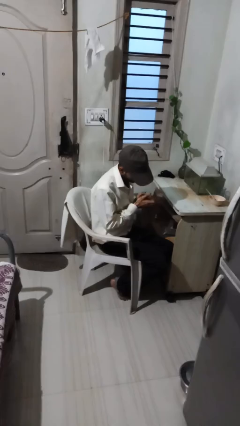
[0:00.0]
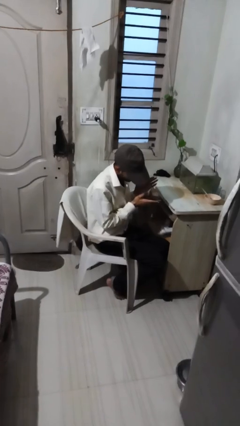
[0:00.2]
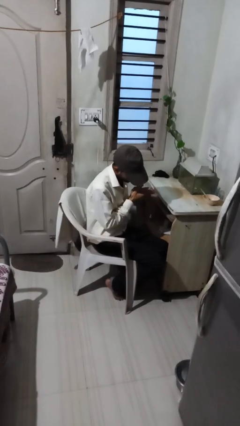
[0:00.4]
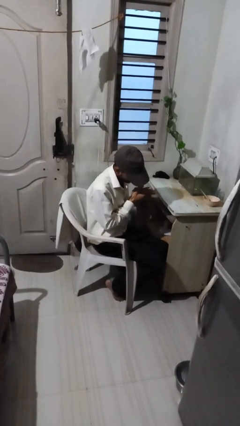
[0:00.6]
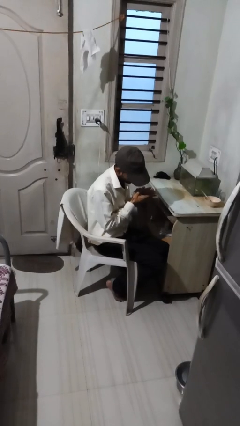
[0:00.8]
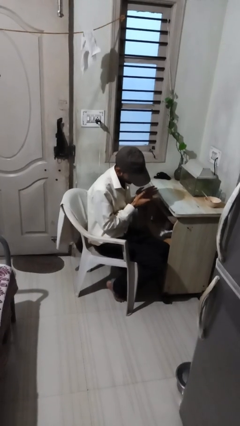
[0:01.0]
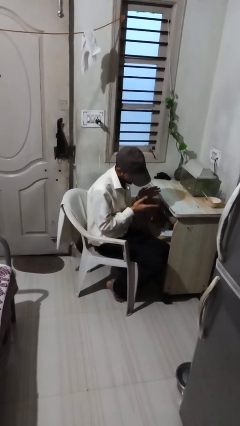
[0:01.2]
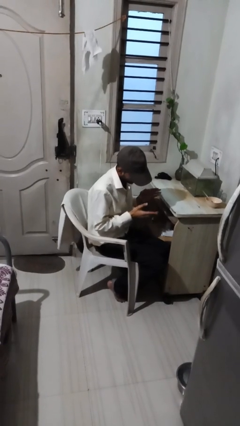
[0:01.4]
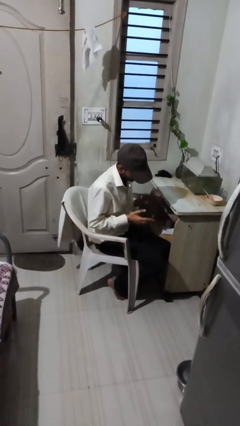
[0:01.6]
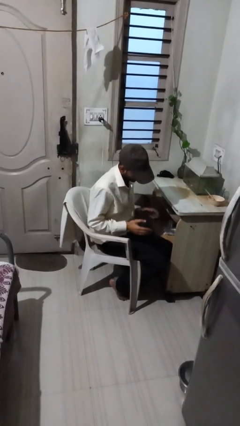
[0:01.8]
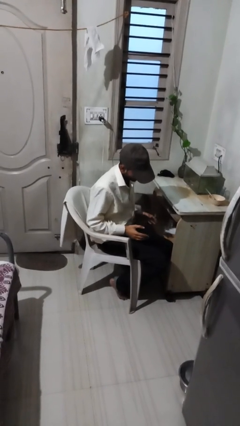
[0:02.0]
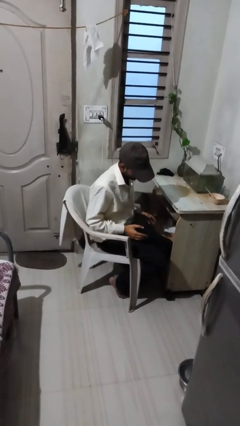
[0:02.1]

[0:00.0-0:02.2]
person claps hands

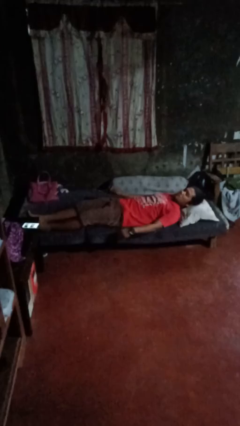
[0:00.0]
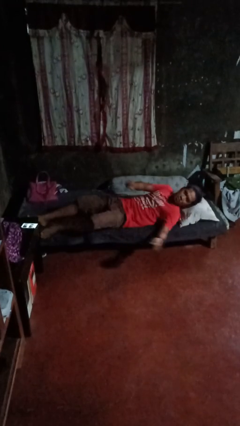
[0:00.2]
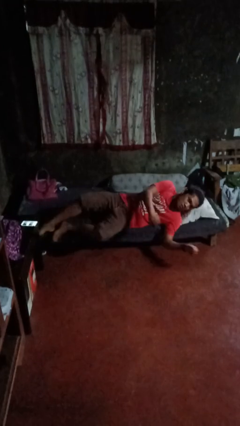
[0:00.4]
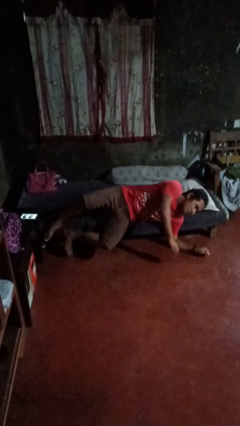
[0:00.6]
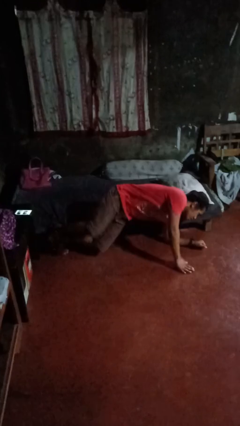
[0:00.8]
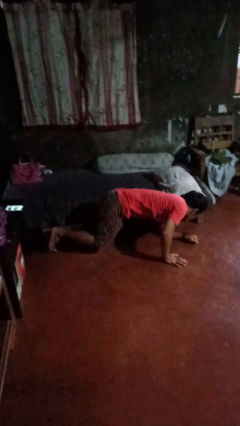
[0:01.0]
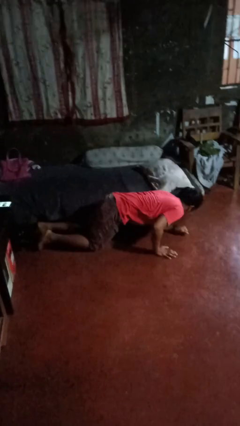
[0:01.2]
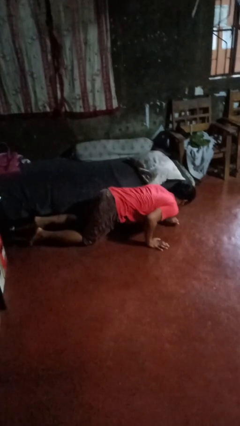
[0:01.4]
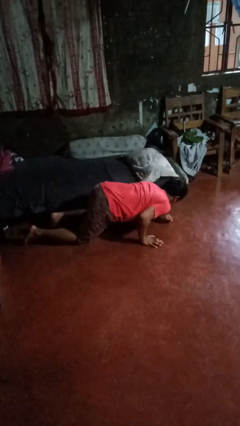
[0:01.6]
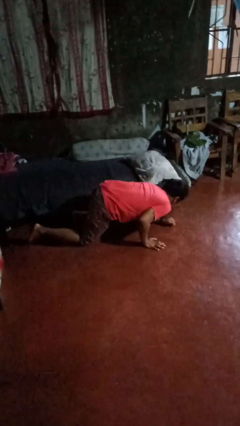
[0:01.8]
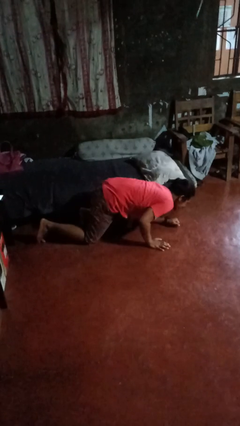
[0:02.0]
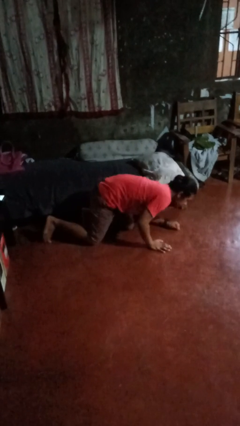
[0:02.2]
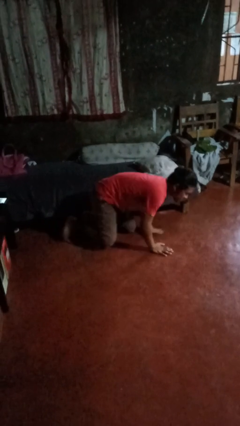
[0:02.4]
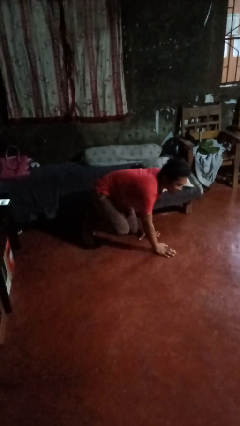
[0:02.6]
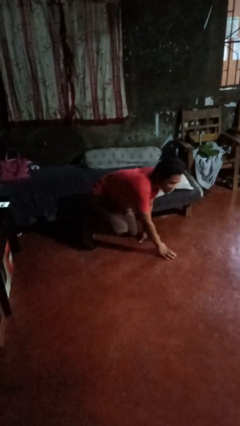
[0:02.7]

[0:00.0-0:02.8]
person falls from bed

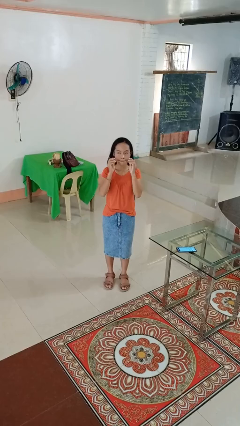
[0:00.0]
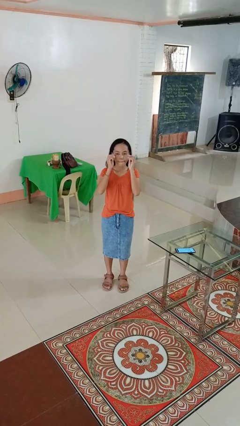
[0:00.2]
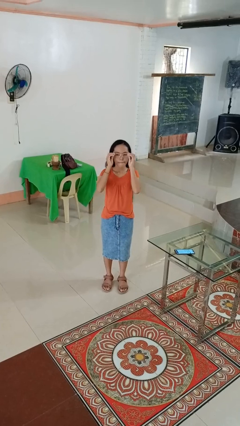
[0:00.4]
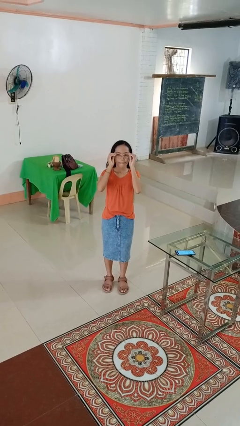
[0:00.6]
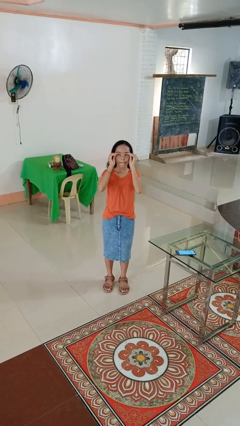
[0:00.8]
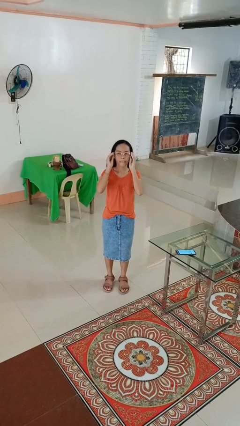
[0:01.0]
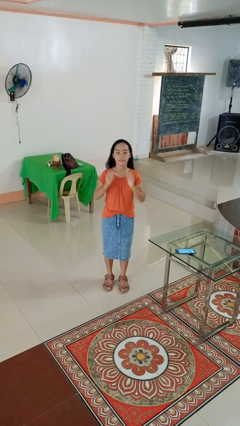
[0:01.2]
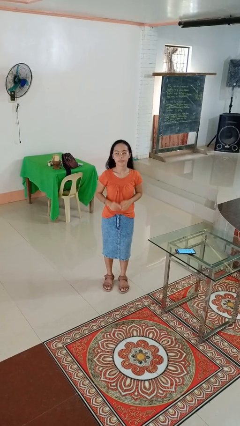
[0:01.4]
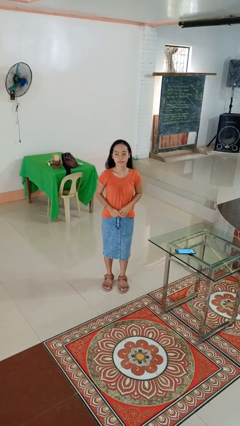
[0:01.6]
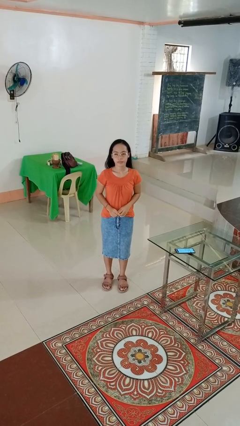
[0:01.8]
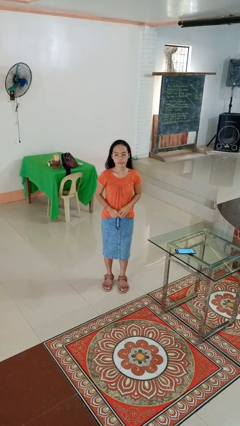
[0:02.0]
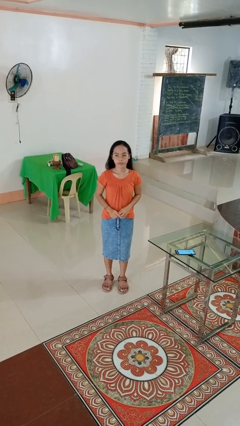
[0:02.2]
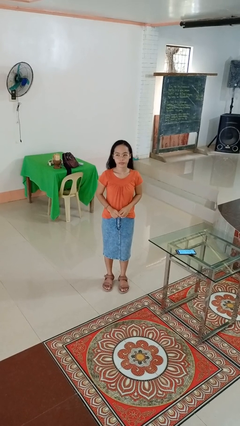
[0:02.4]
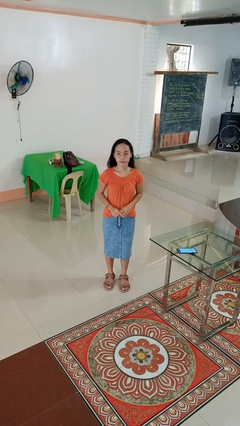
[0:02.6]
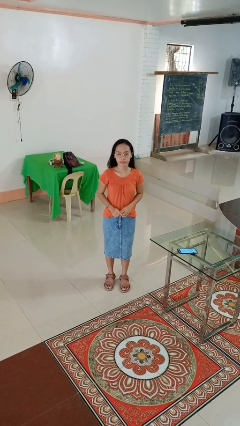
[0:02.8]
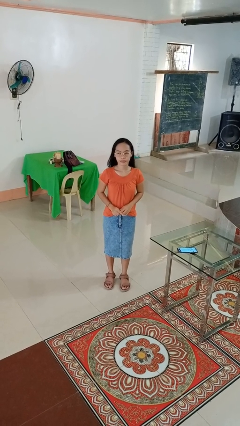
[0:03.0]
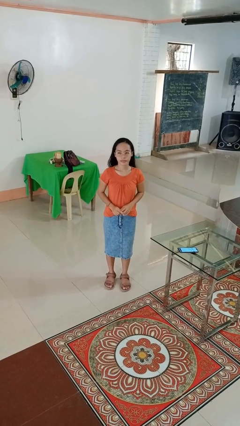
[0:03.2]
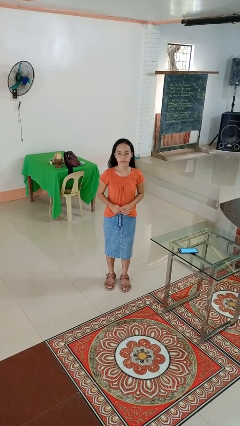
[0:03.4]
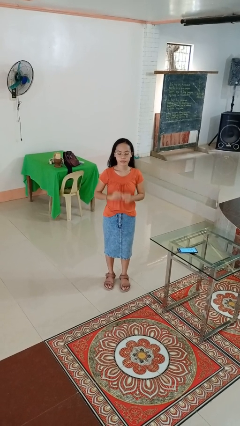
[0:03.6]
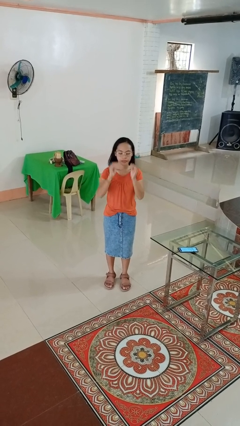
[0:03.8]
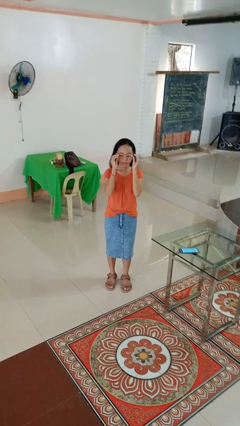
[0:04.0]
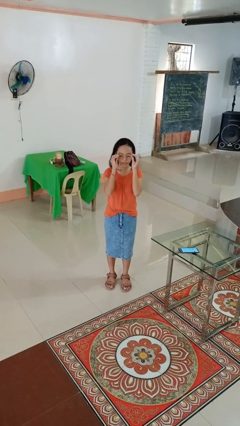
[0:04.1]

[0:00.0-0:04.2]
person puts on glasses

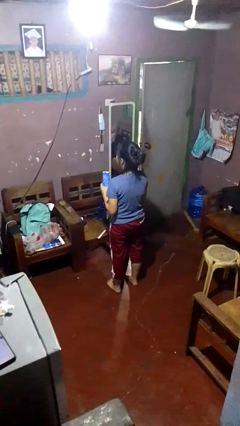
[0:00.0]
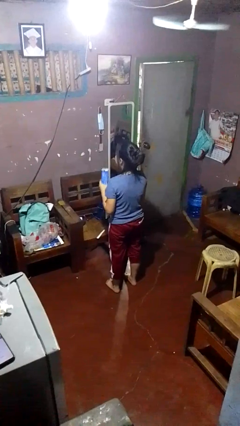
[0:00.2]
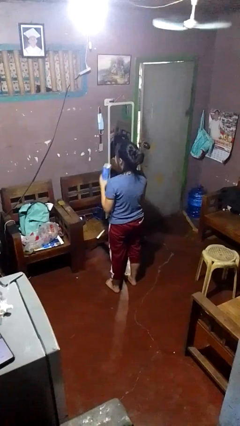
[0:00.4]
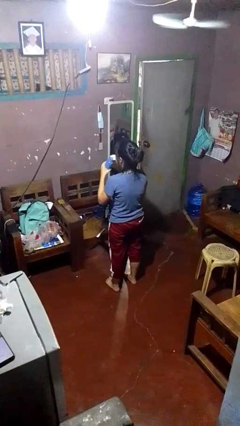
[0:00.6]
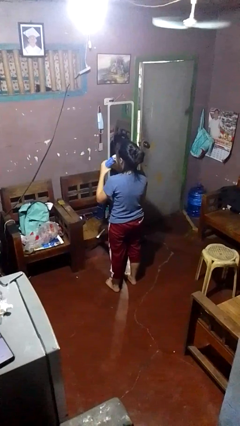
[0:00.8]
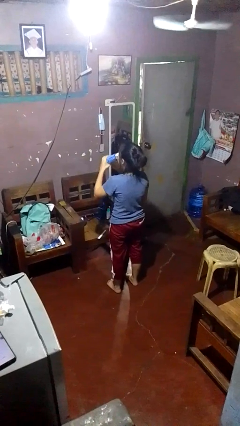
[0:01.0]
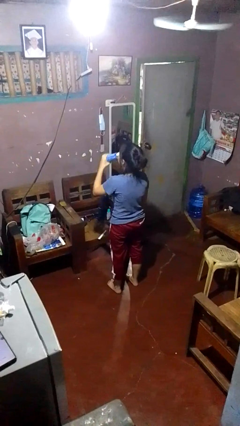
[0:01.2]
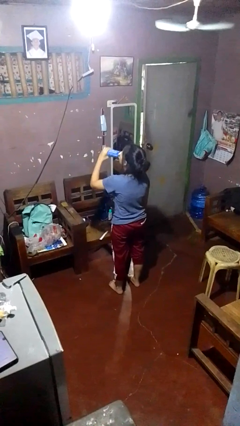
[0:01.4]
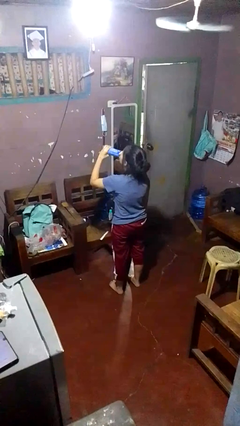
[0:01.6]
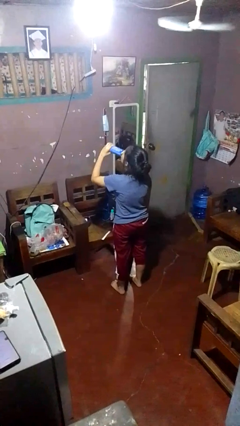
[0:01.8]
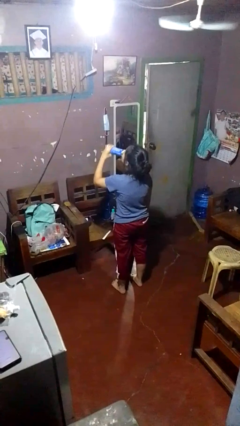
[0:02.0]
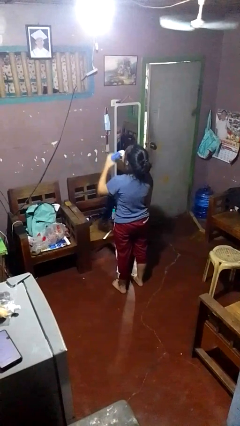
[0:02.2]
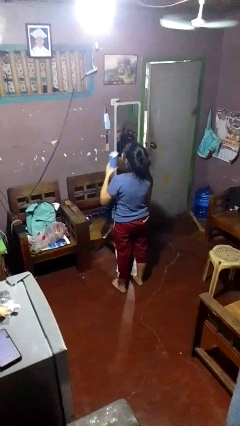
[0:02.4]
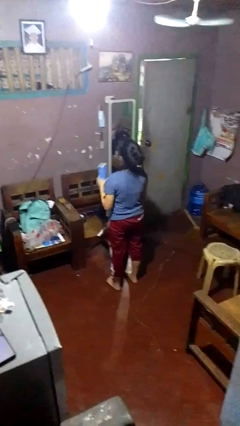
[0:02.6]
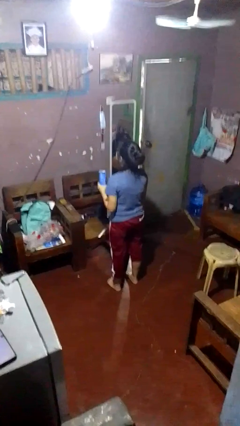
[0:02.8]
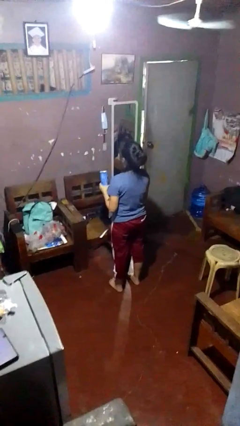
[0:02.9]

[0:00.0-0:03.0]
person drinks from beverage can

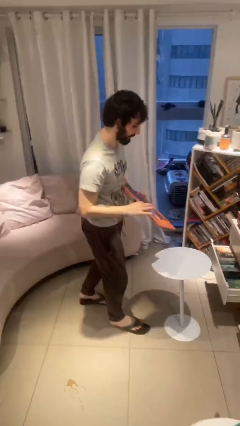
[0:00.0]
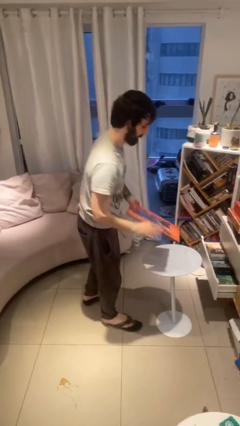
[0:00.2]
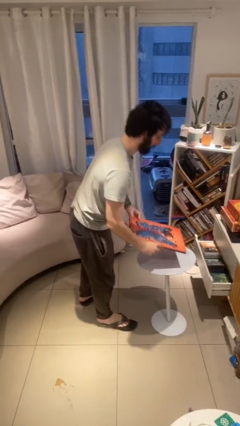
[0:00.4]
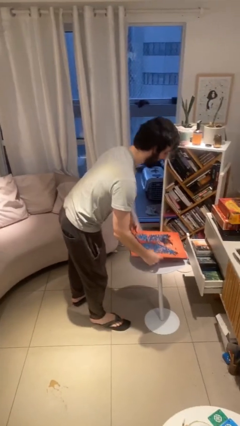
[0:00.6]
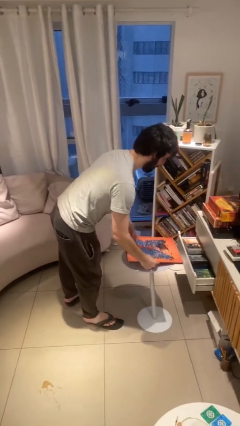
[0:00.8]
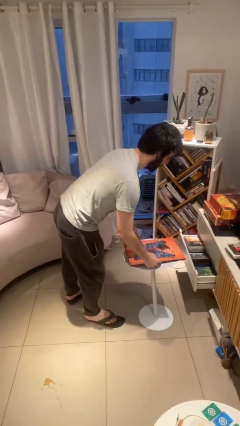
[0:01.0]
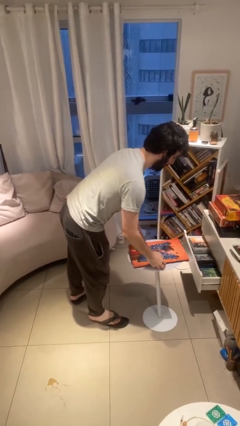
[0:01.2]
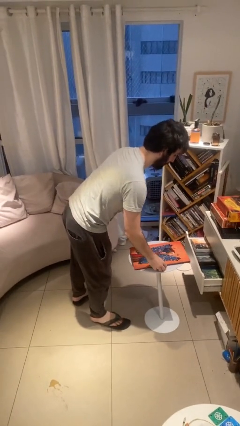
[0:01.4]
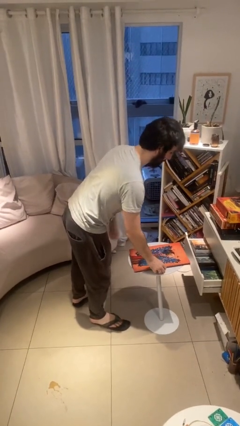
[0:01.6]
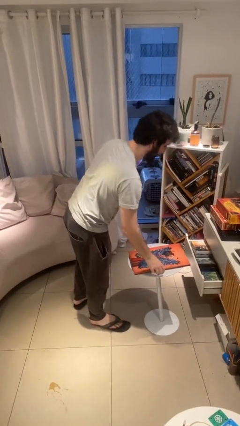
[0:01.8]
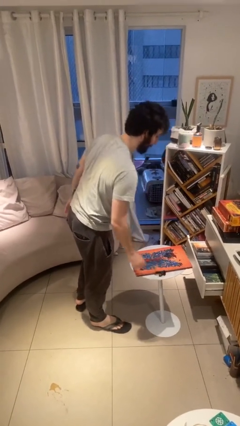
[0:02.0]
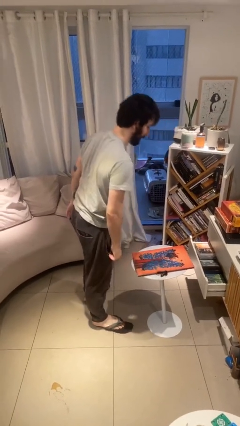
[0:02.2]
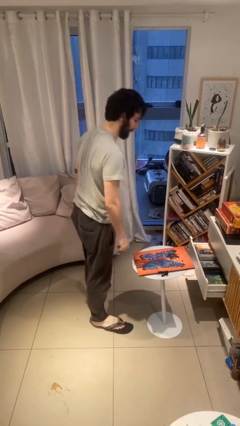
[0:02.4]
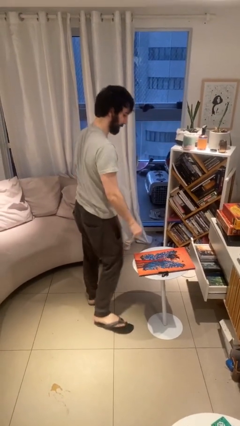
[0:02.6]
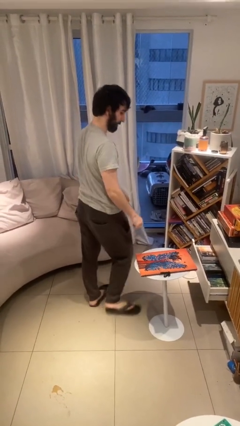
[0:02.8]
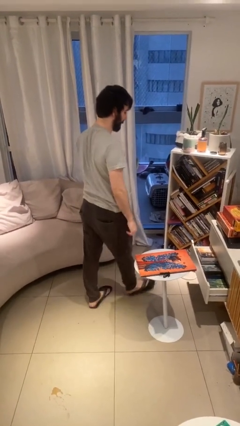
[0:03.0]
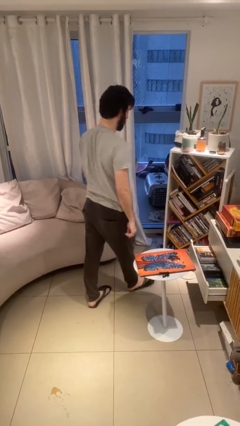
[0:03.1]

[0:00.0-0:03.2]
person puts down object on table

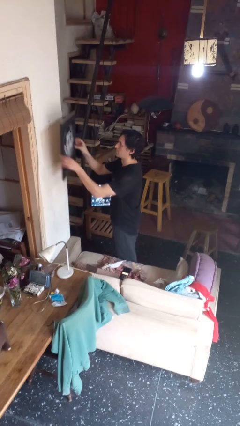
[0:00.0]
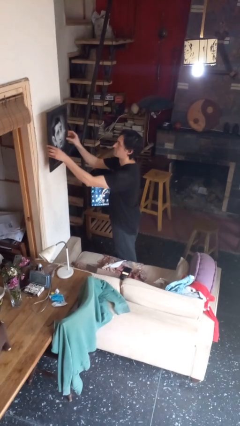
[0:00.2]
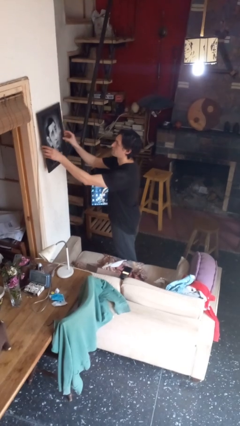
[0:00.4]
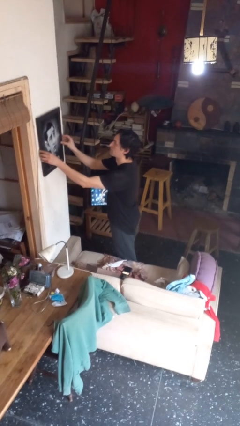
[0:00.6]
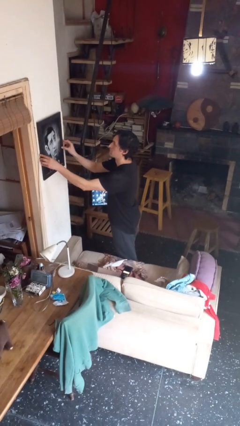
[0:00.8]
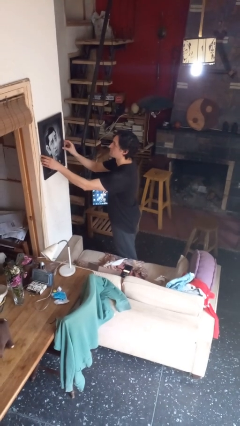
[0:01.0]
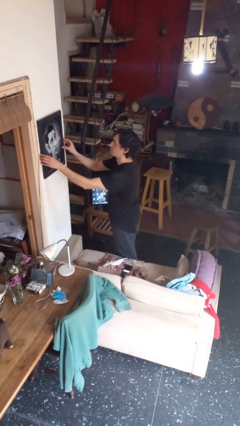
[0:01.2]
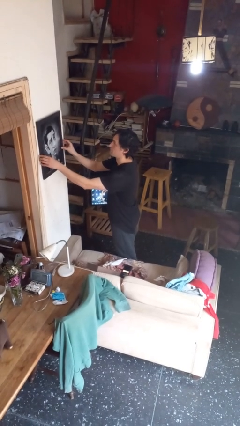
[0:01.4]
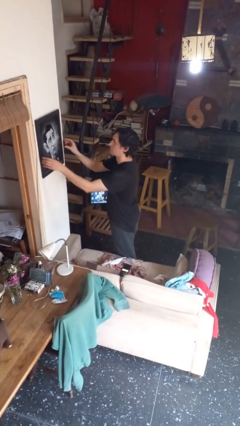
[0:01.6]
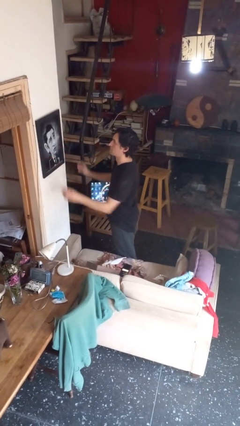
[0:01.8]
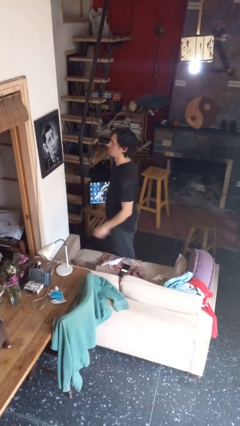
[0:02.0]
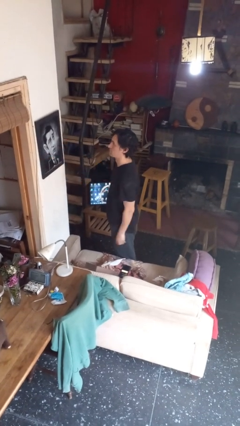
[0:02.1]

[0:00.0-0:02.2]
person puts up picture frame
